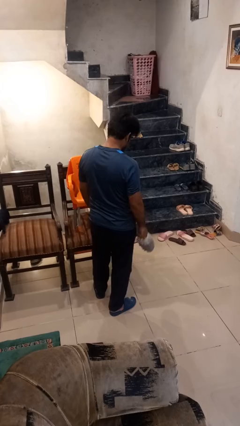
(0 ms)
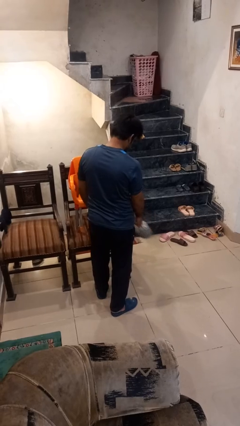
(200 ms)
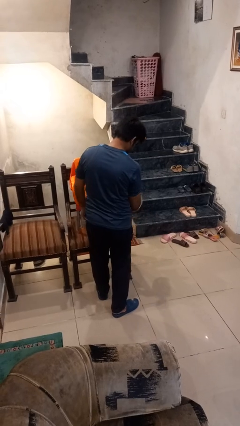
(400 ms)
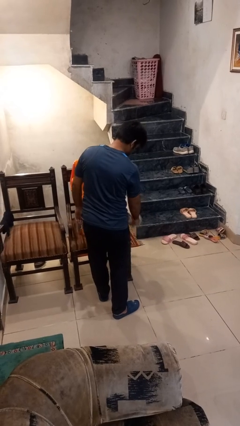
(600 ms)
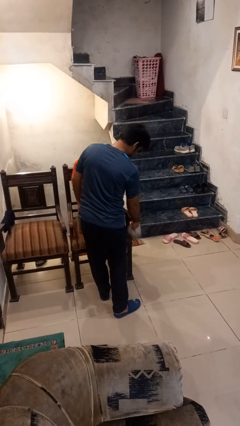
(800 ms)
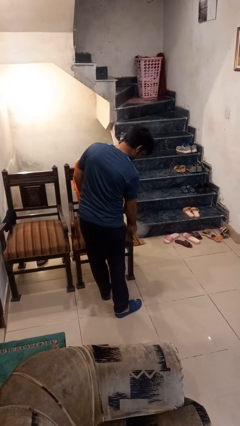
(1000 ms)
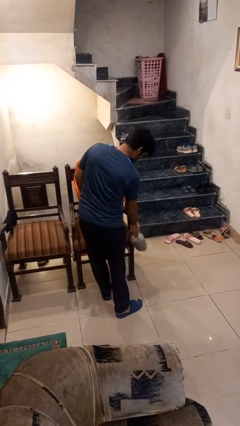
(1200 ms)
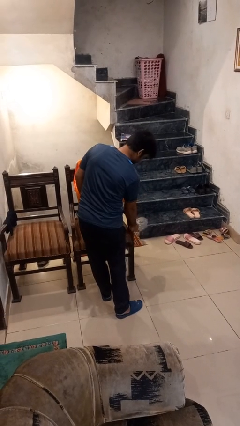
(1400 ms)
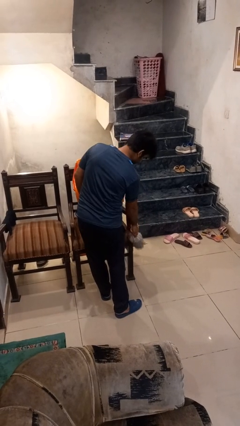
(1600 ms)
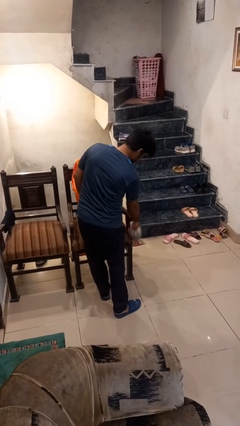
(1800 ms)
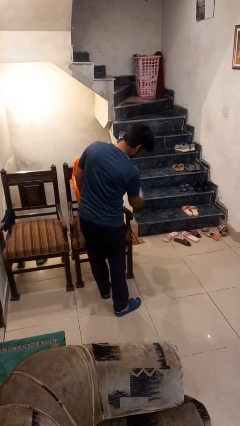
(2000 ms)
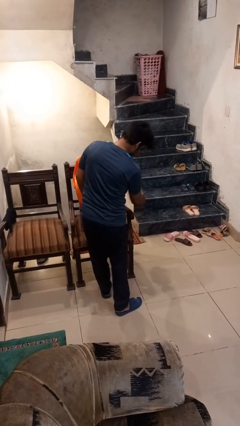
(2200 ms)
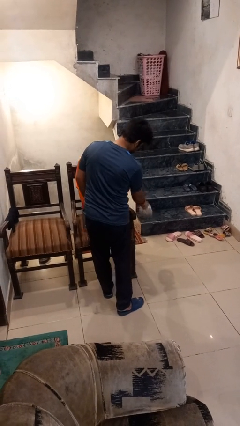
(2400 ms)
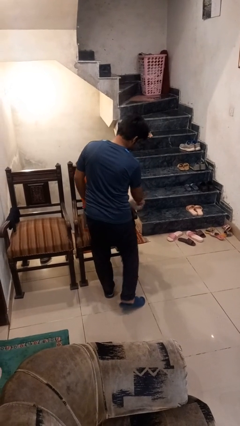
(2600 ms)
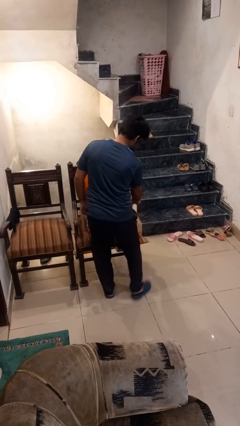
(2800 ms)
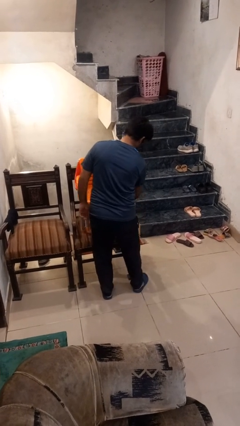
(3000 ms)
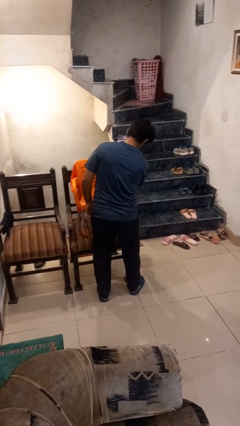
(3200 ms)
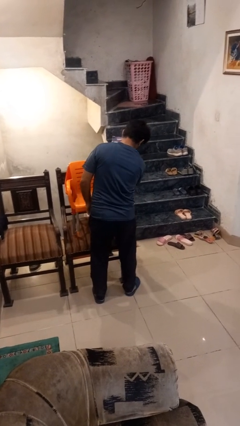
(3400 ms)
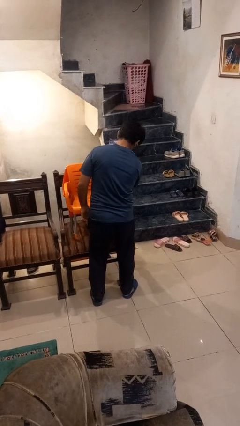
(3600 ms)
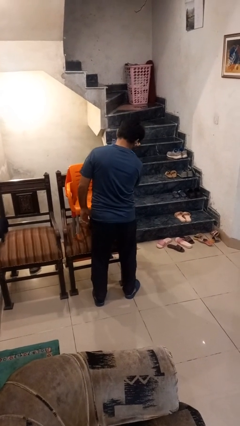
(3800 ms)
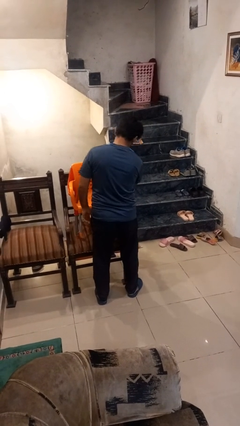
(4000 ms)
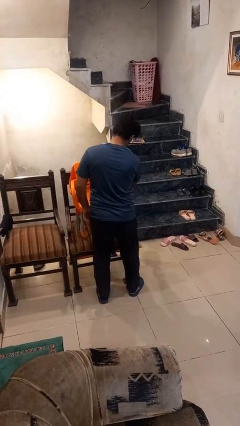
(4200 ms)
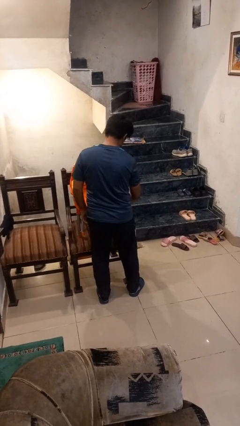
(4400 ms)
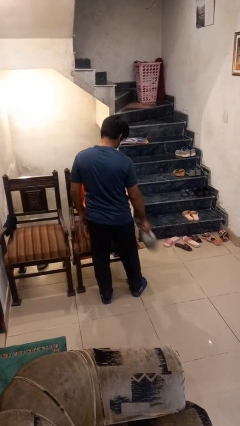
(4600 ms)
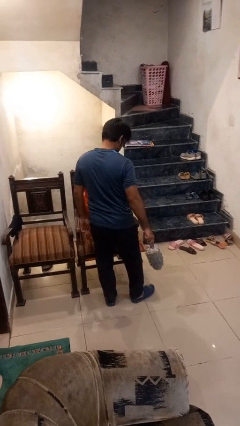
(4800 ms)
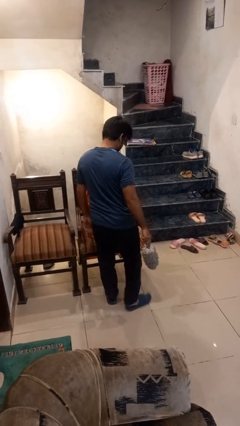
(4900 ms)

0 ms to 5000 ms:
person dusts furniture

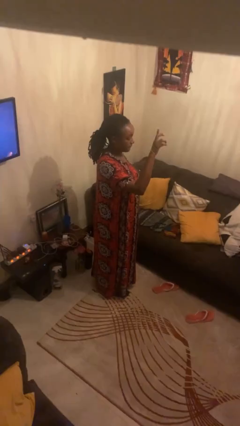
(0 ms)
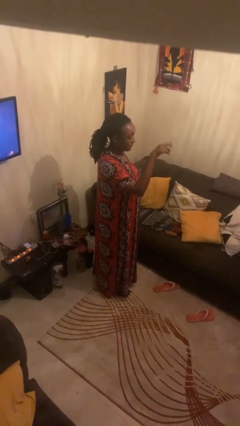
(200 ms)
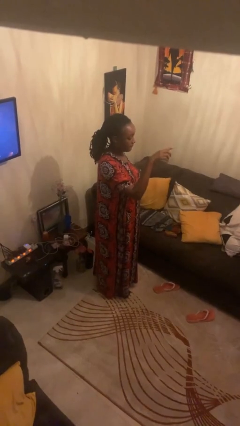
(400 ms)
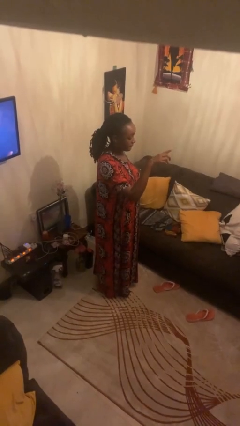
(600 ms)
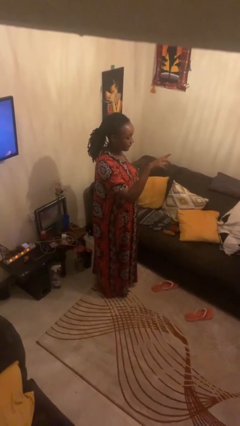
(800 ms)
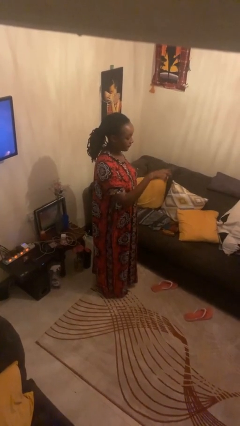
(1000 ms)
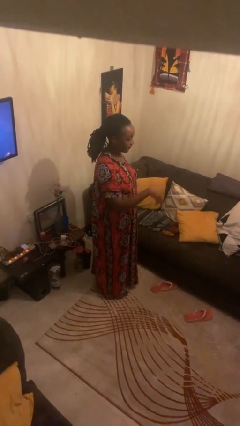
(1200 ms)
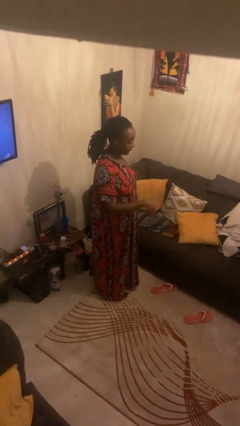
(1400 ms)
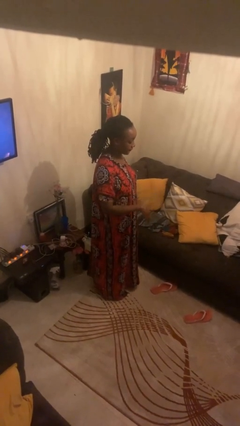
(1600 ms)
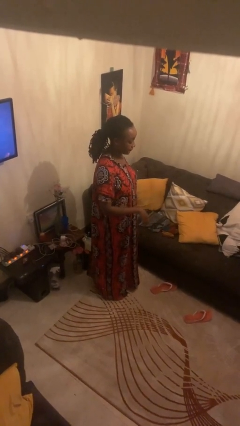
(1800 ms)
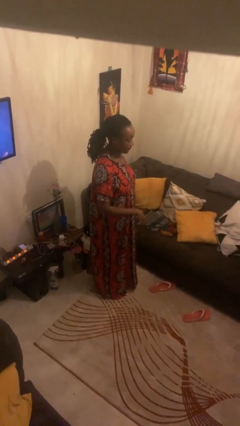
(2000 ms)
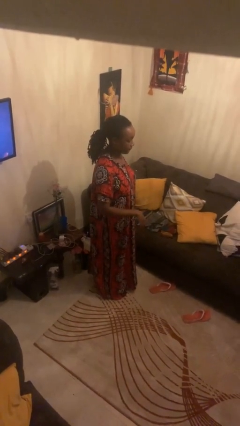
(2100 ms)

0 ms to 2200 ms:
person gestures swipe down

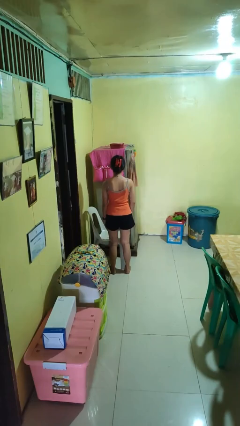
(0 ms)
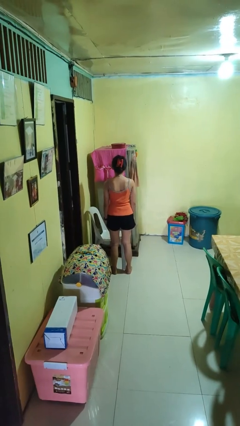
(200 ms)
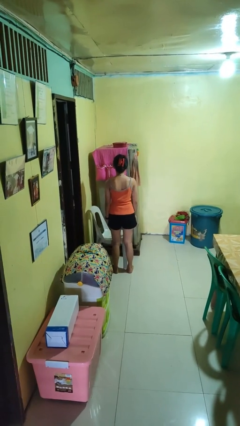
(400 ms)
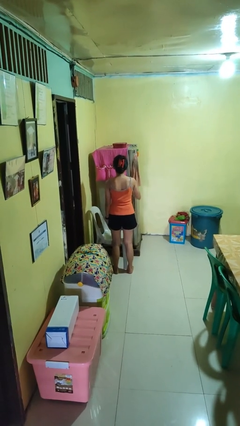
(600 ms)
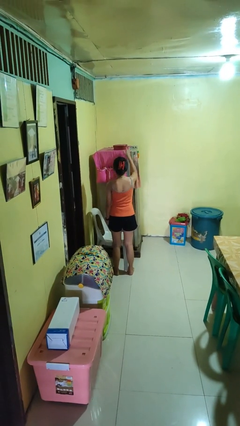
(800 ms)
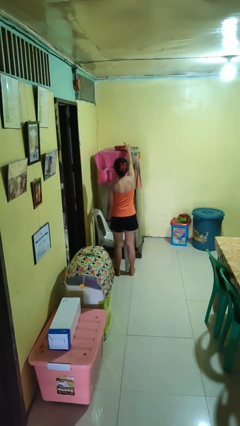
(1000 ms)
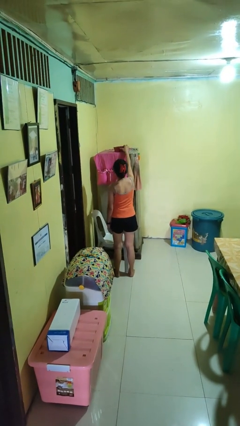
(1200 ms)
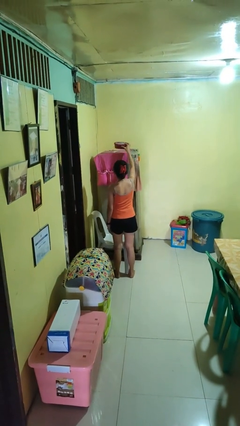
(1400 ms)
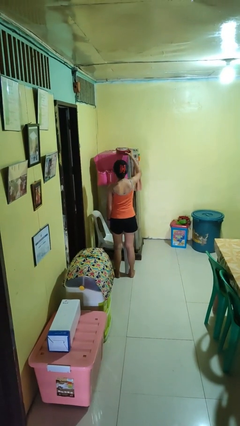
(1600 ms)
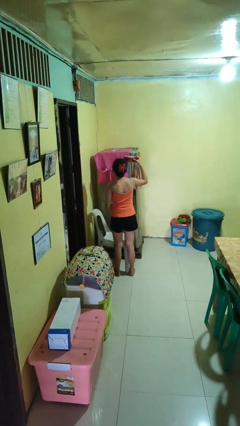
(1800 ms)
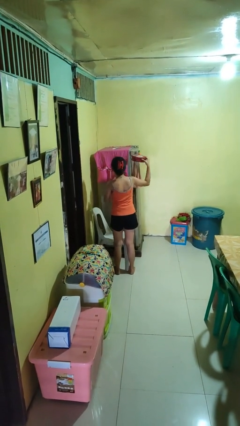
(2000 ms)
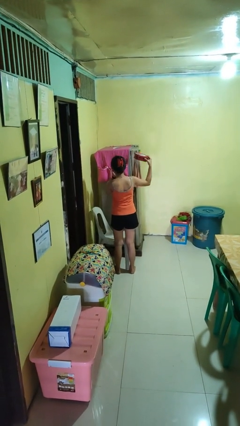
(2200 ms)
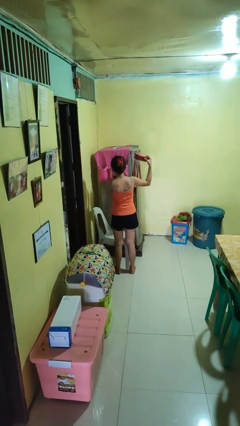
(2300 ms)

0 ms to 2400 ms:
person picks up object from shelf

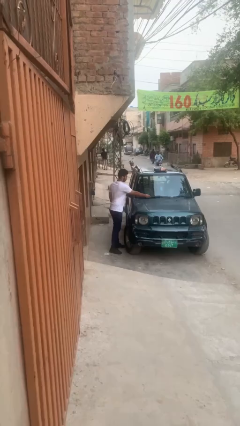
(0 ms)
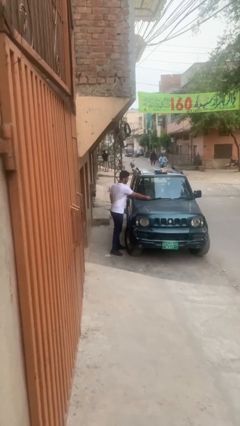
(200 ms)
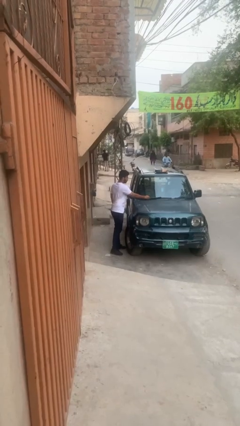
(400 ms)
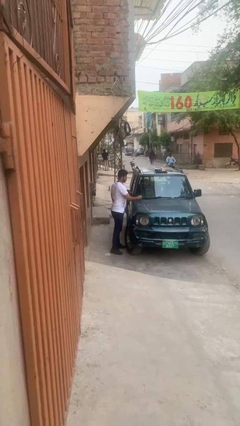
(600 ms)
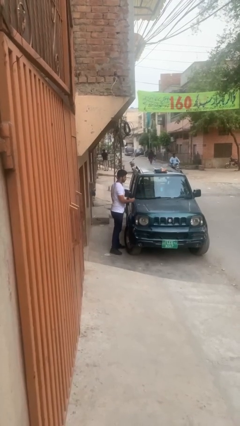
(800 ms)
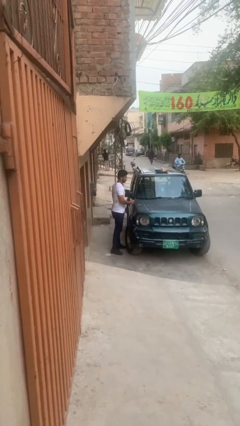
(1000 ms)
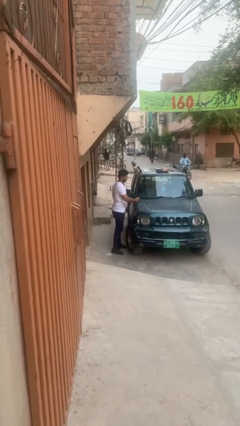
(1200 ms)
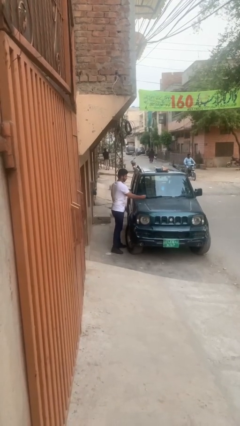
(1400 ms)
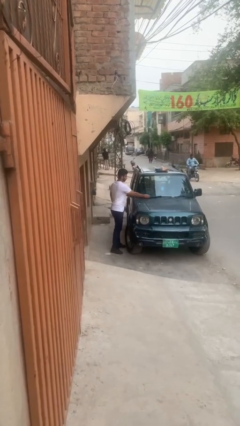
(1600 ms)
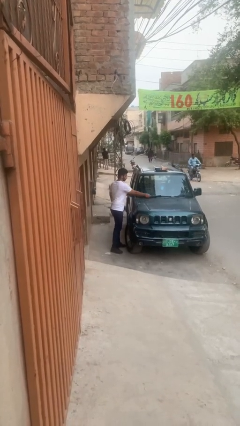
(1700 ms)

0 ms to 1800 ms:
person flips down car wipers

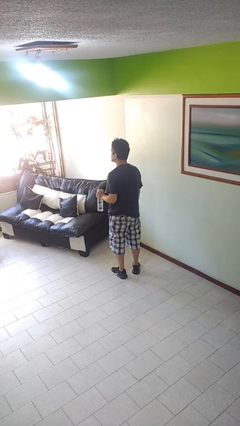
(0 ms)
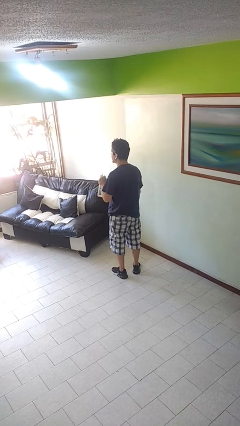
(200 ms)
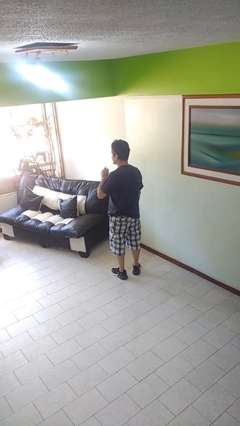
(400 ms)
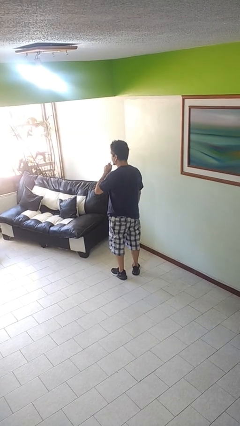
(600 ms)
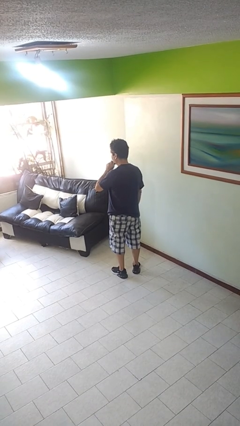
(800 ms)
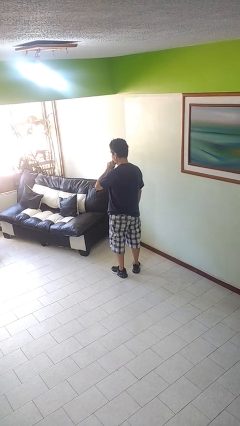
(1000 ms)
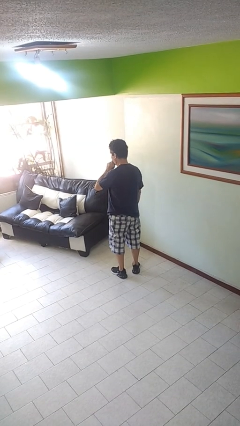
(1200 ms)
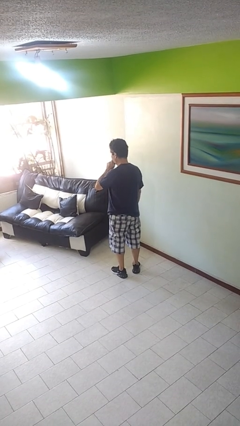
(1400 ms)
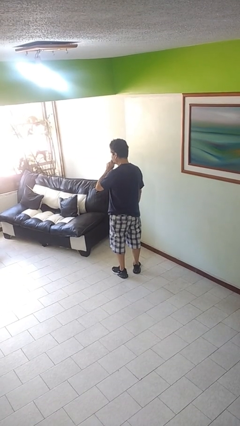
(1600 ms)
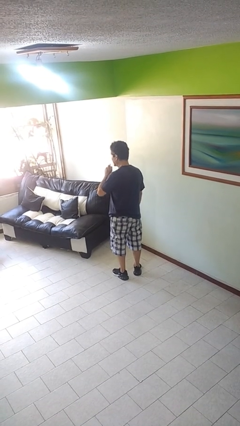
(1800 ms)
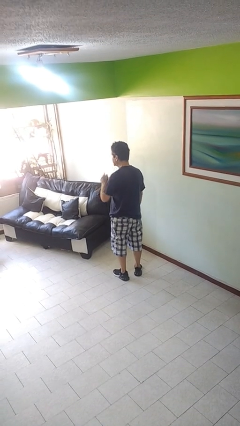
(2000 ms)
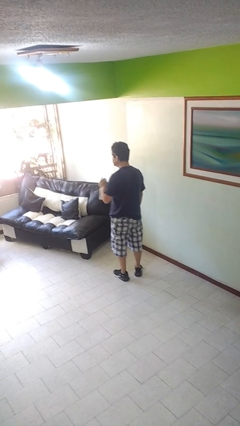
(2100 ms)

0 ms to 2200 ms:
person drinks from straw

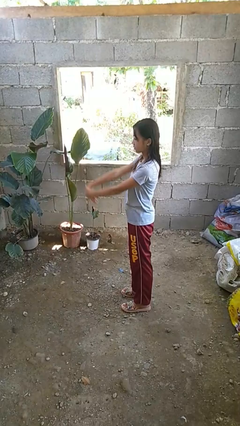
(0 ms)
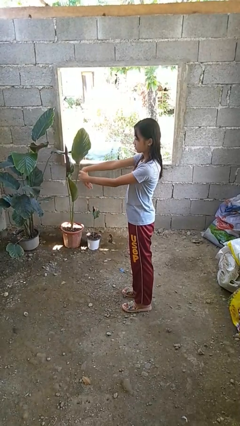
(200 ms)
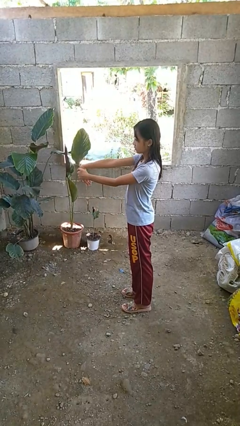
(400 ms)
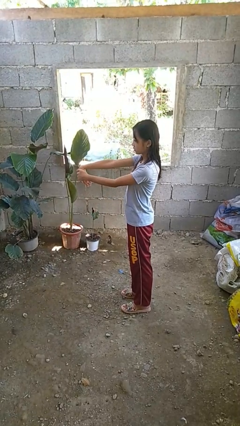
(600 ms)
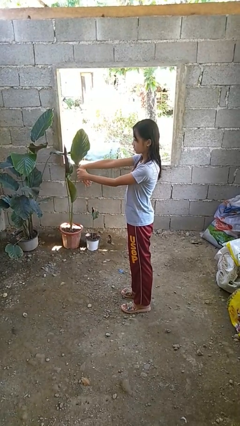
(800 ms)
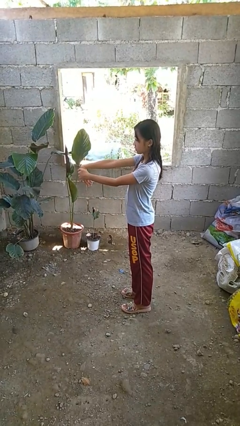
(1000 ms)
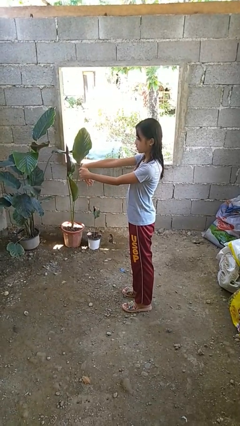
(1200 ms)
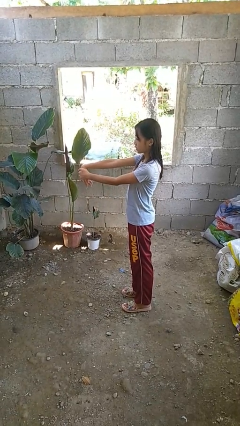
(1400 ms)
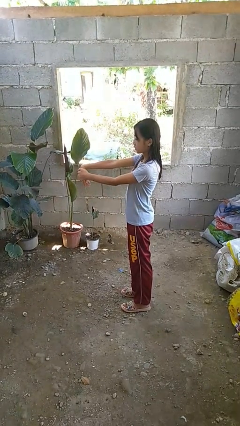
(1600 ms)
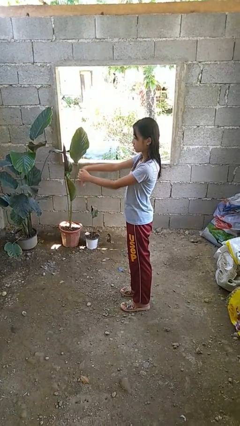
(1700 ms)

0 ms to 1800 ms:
person cracks knuckles

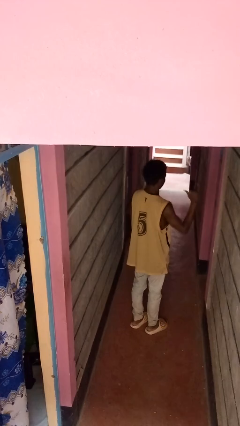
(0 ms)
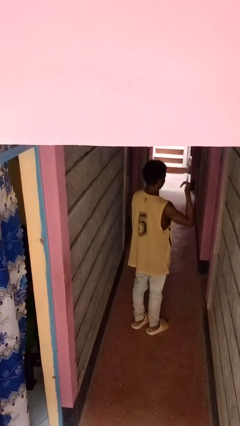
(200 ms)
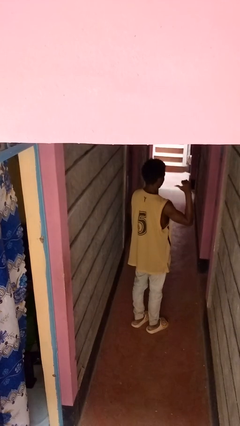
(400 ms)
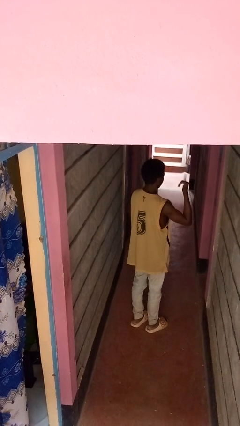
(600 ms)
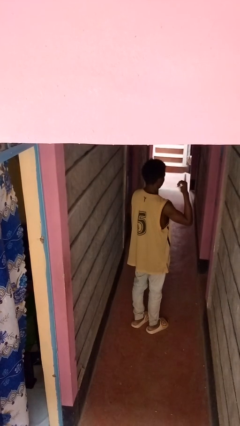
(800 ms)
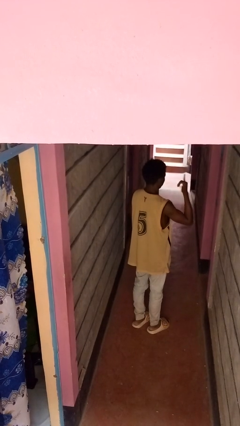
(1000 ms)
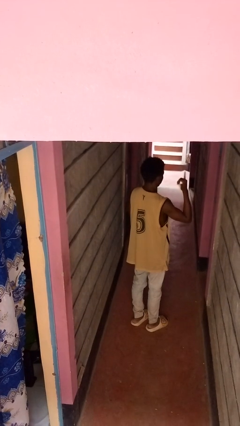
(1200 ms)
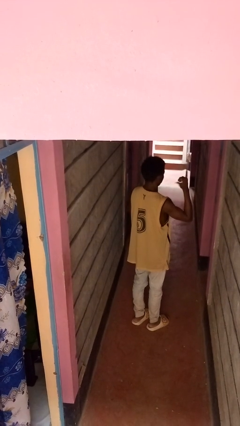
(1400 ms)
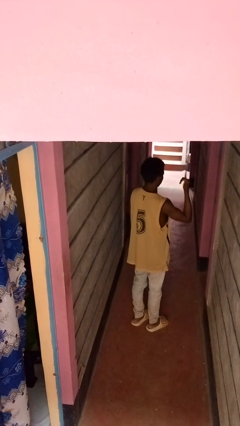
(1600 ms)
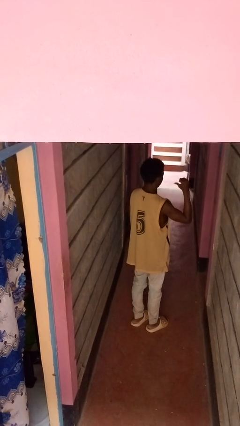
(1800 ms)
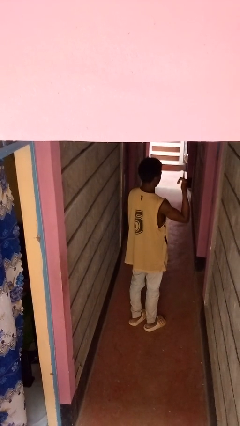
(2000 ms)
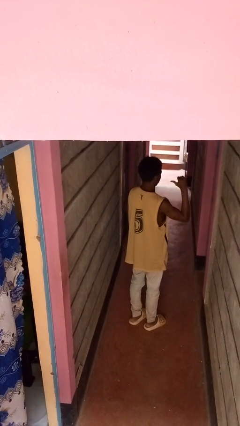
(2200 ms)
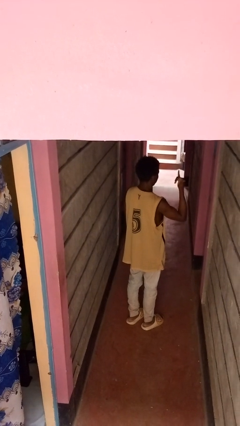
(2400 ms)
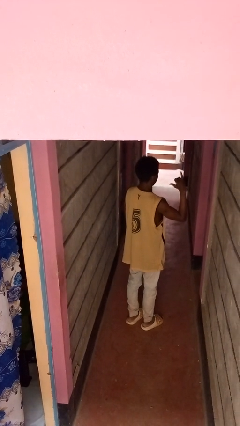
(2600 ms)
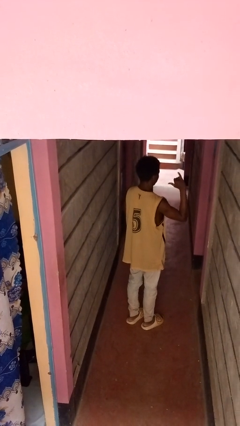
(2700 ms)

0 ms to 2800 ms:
person gestures hang loose
